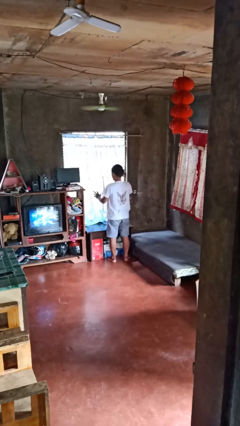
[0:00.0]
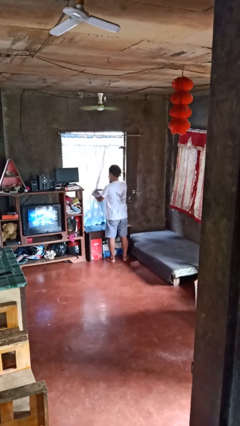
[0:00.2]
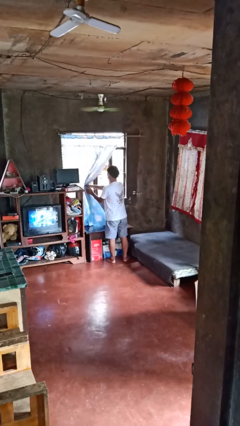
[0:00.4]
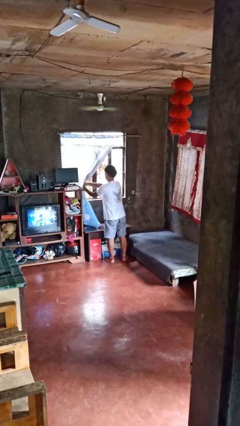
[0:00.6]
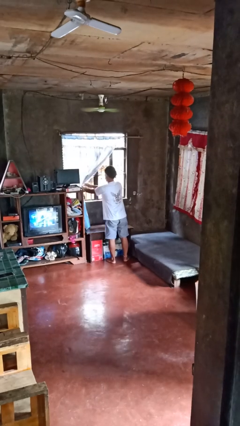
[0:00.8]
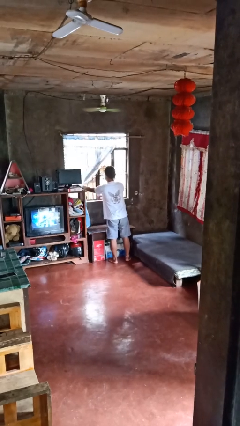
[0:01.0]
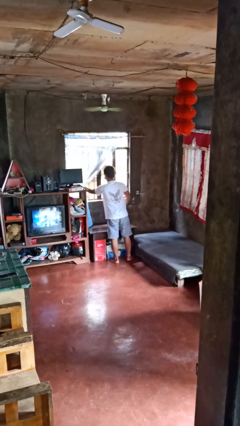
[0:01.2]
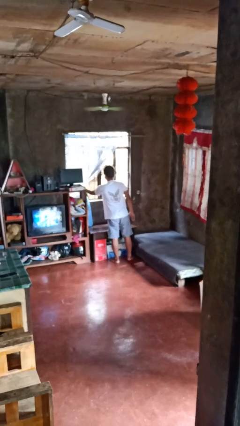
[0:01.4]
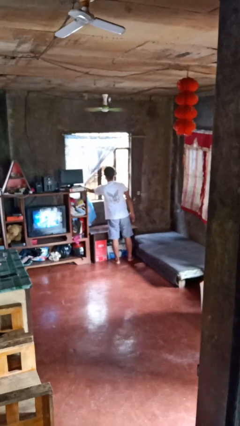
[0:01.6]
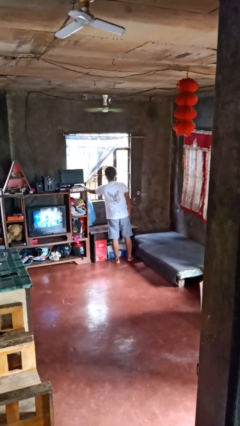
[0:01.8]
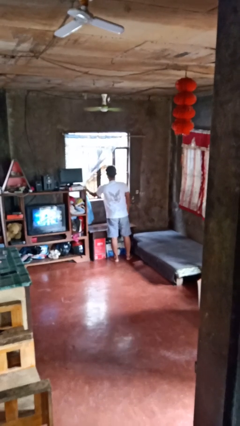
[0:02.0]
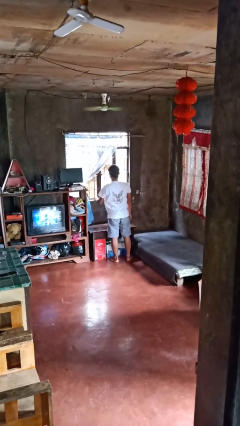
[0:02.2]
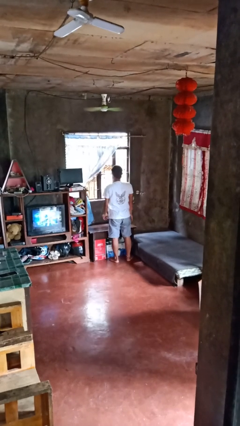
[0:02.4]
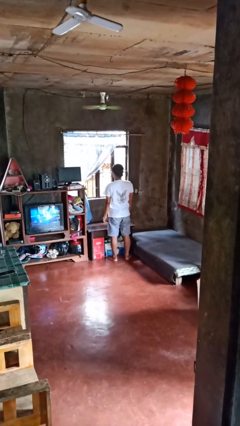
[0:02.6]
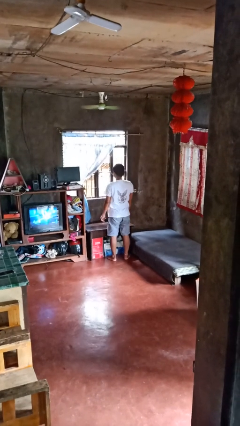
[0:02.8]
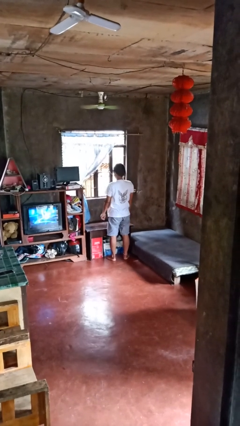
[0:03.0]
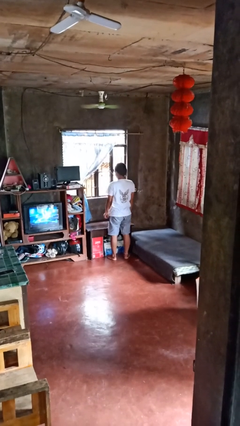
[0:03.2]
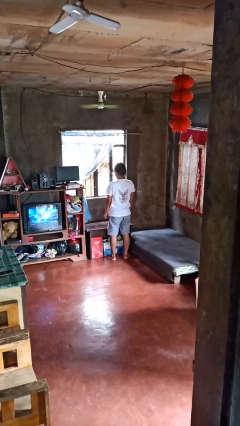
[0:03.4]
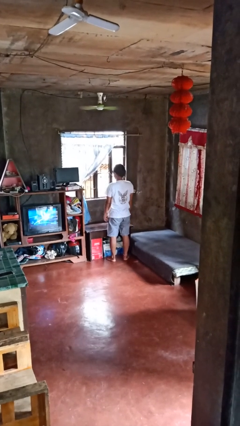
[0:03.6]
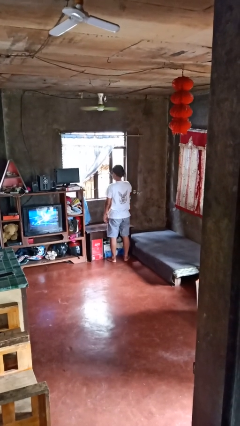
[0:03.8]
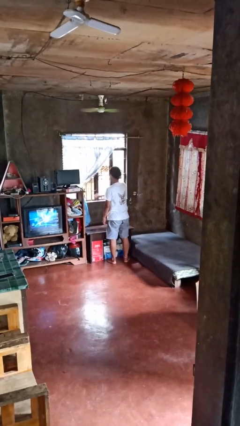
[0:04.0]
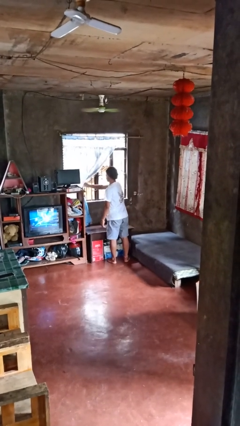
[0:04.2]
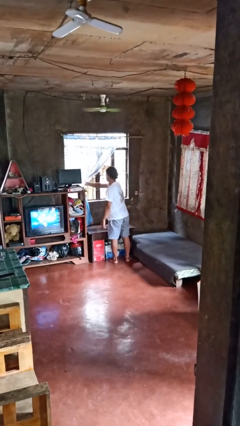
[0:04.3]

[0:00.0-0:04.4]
person opens curtains

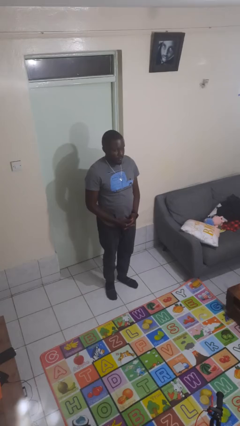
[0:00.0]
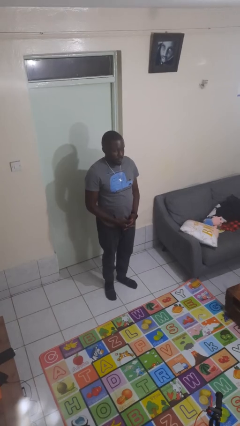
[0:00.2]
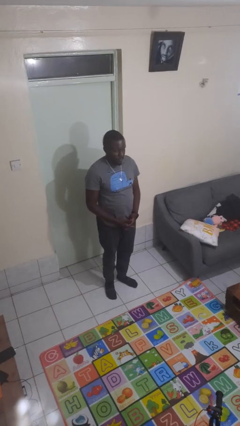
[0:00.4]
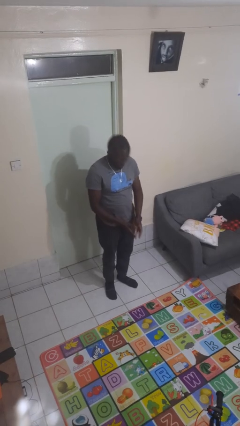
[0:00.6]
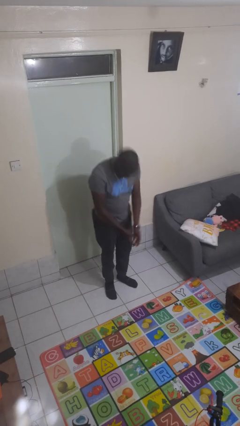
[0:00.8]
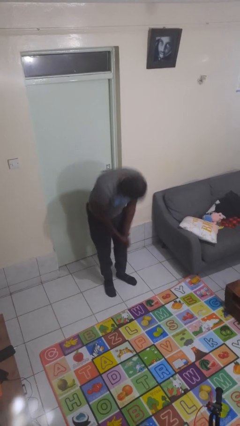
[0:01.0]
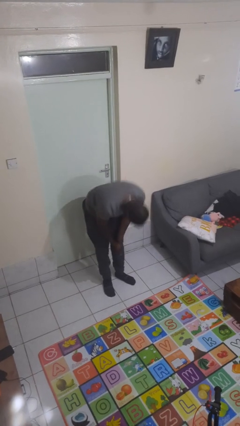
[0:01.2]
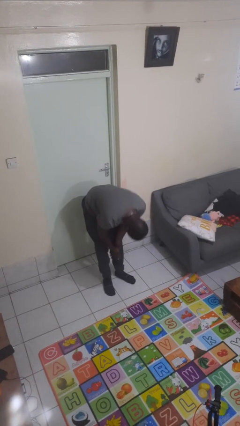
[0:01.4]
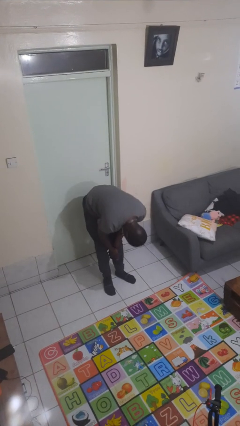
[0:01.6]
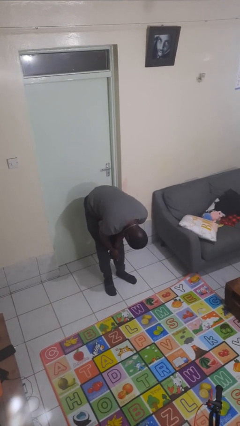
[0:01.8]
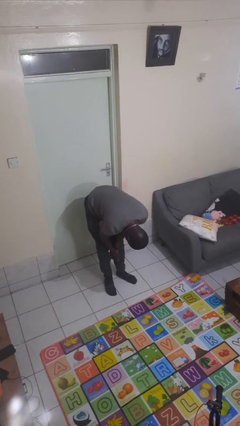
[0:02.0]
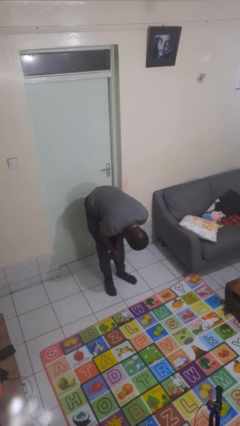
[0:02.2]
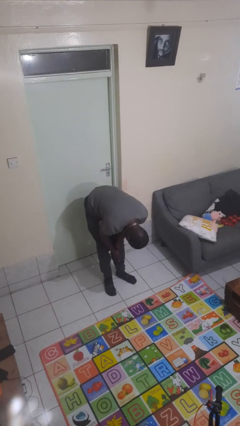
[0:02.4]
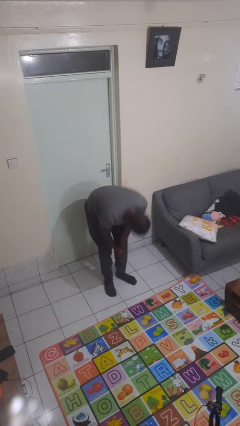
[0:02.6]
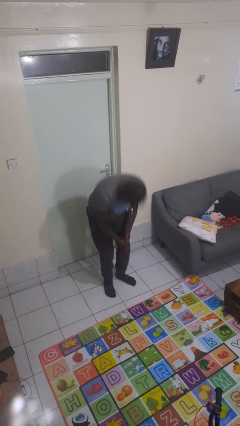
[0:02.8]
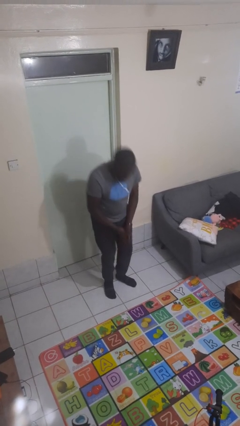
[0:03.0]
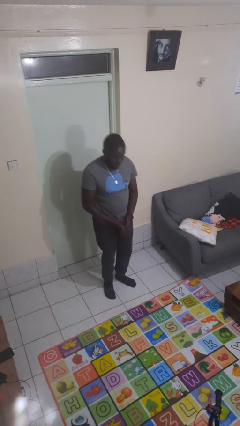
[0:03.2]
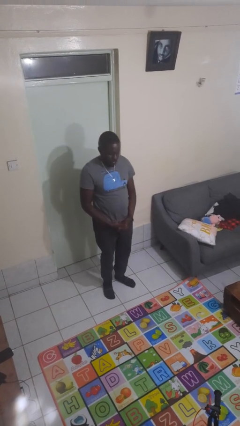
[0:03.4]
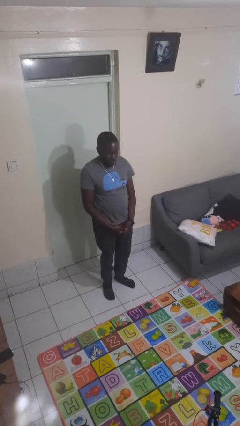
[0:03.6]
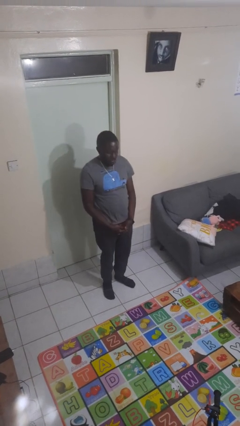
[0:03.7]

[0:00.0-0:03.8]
person bows

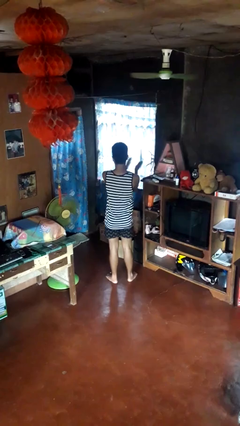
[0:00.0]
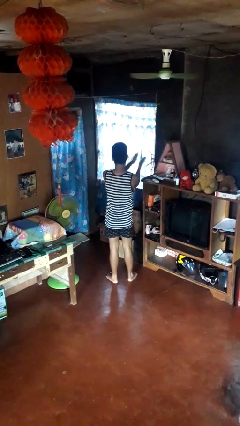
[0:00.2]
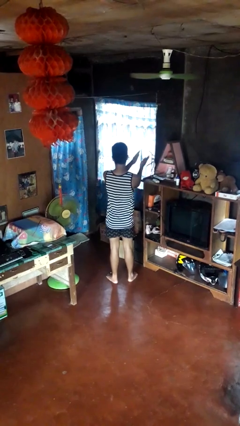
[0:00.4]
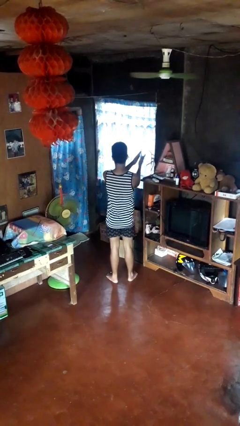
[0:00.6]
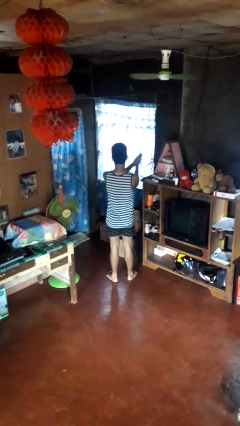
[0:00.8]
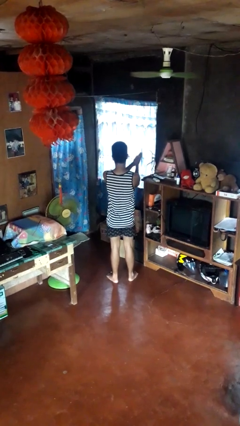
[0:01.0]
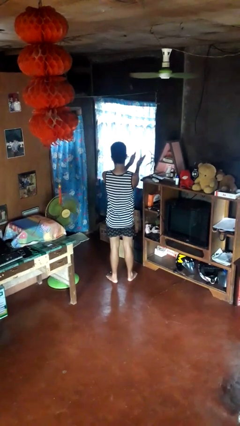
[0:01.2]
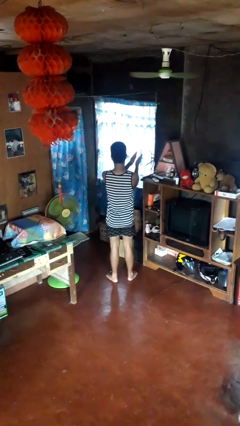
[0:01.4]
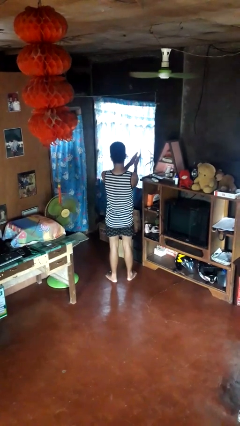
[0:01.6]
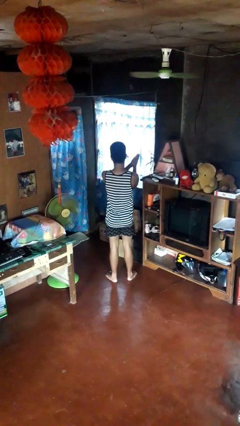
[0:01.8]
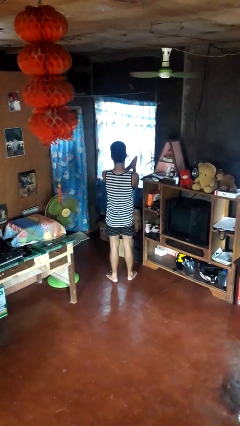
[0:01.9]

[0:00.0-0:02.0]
person claps hands

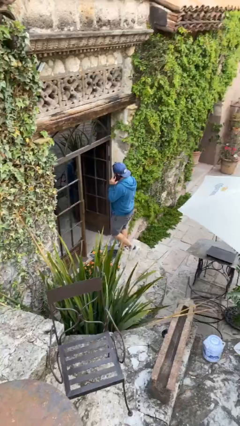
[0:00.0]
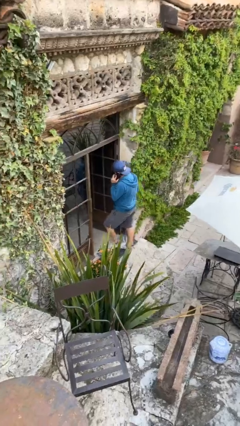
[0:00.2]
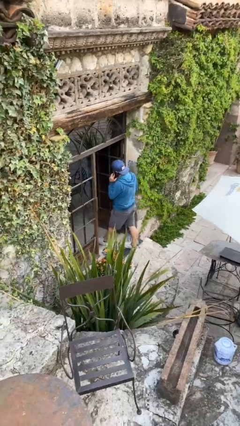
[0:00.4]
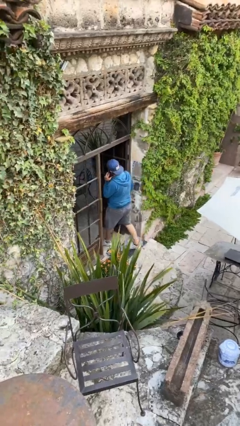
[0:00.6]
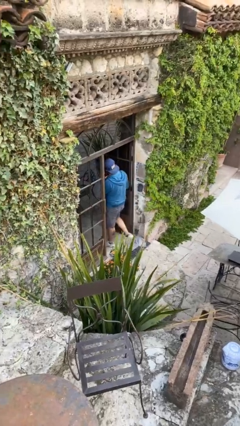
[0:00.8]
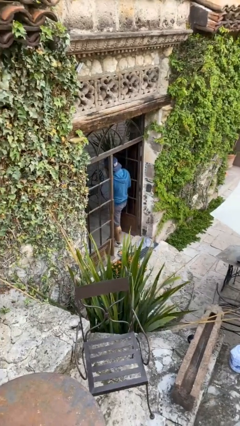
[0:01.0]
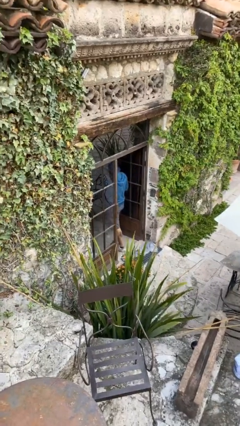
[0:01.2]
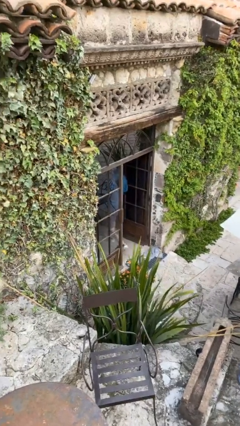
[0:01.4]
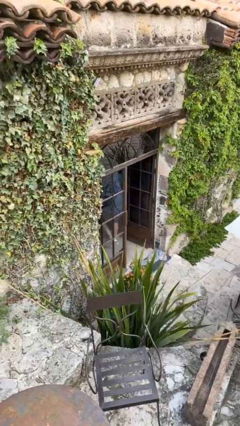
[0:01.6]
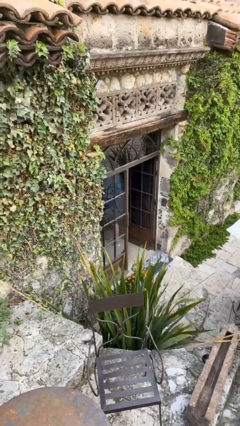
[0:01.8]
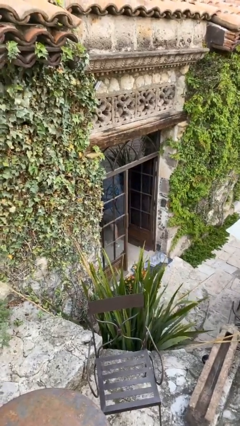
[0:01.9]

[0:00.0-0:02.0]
person exits scene through structure

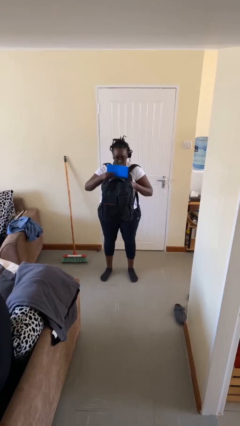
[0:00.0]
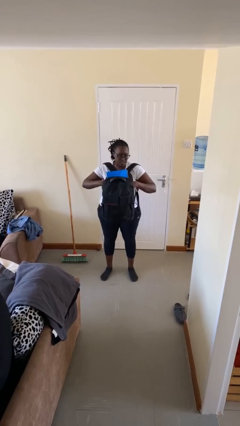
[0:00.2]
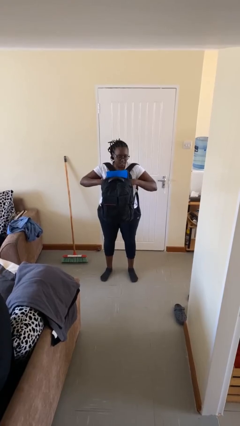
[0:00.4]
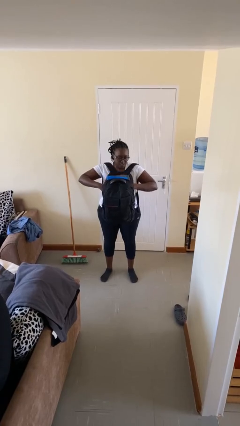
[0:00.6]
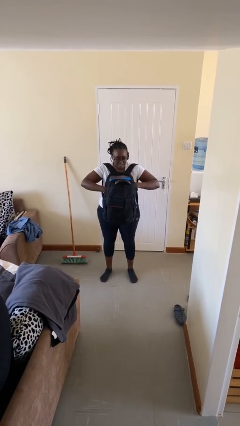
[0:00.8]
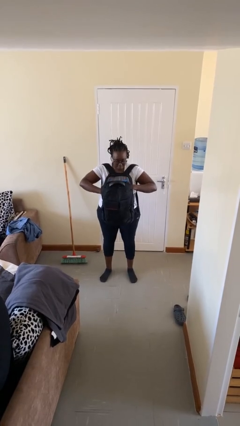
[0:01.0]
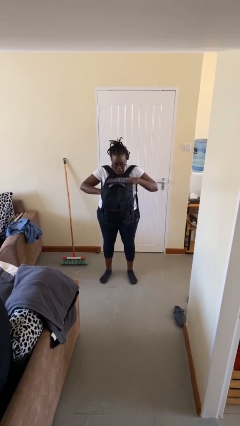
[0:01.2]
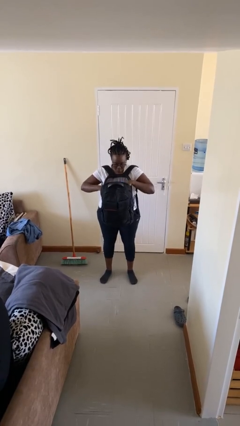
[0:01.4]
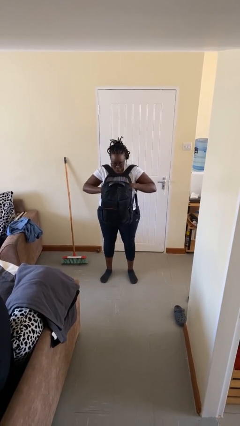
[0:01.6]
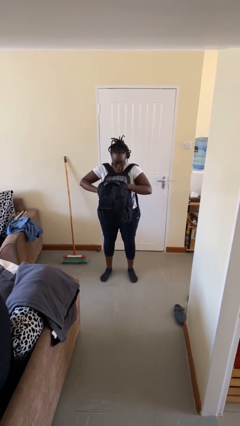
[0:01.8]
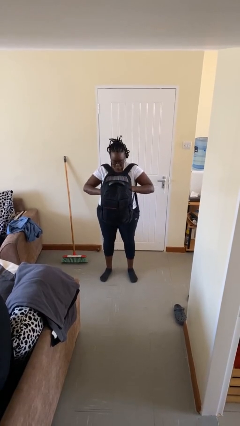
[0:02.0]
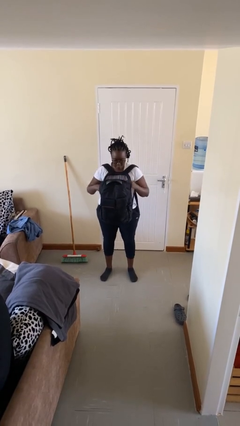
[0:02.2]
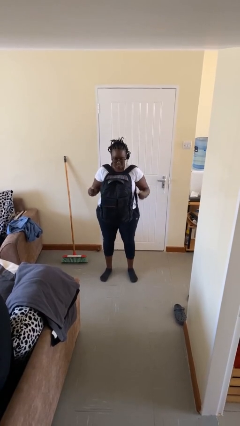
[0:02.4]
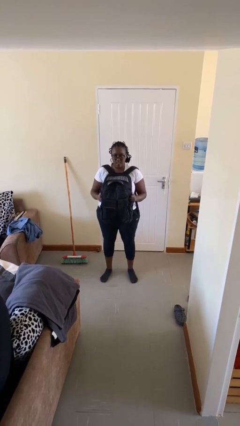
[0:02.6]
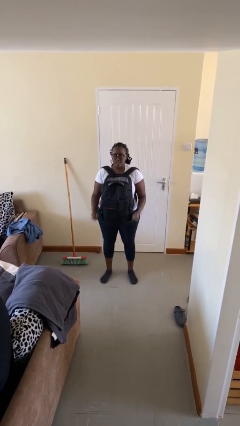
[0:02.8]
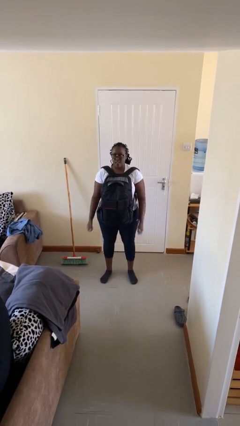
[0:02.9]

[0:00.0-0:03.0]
person puts object into backpack

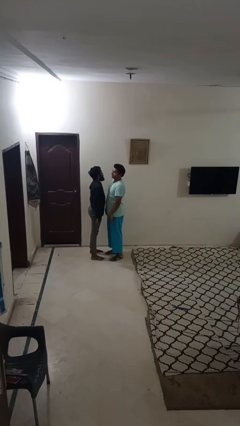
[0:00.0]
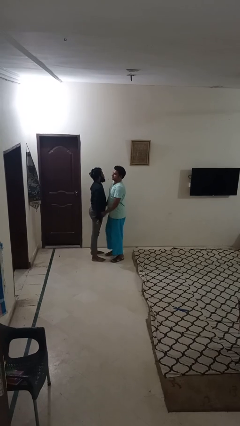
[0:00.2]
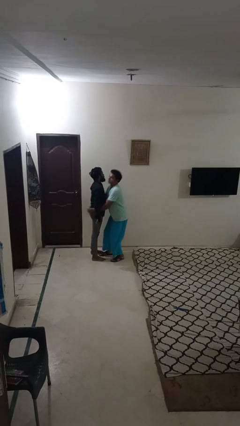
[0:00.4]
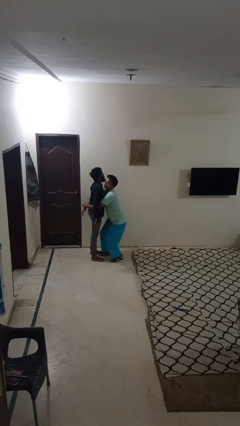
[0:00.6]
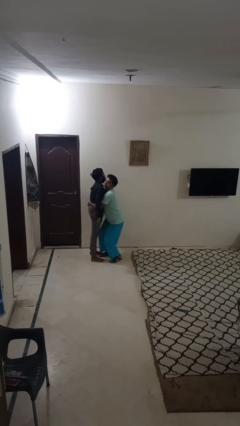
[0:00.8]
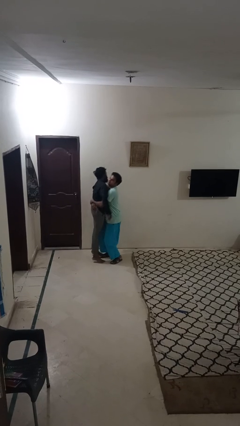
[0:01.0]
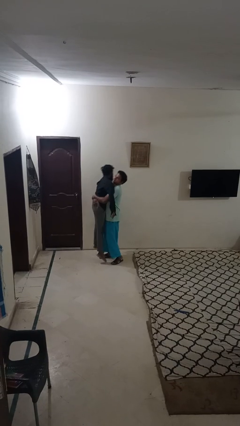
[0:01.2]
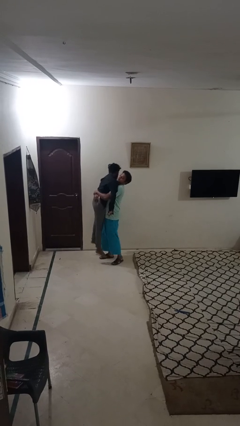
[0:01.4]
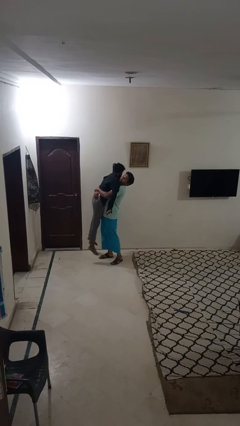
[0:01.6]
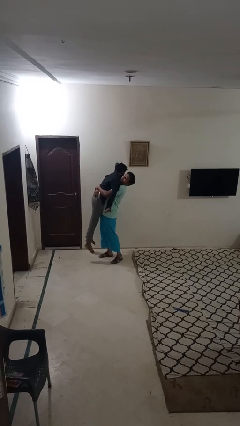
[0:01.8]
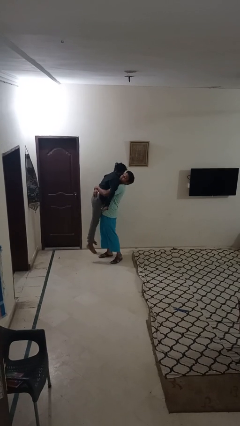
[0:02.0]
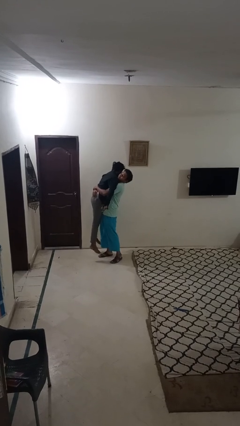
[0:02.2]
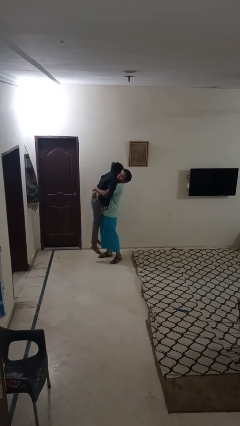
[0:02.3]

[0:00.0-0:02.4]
person picks up person
